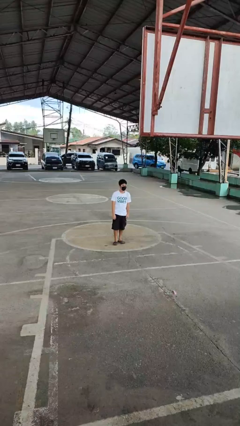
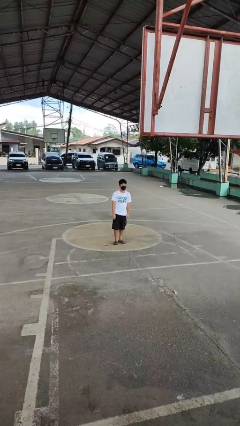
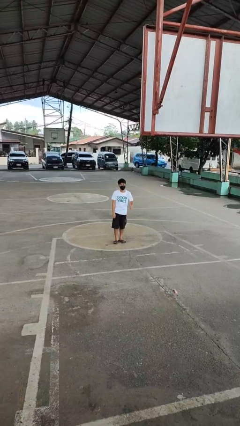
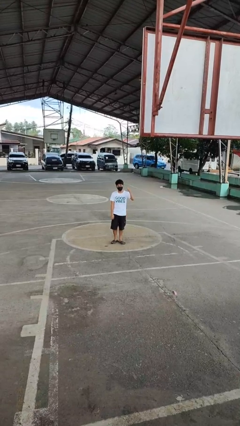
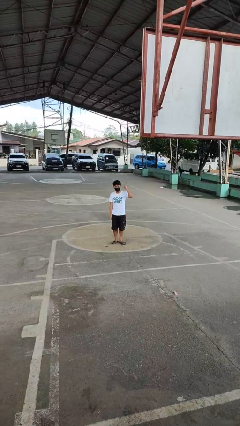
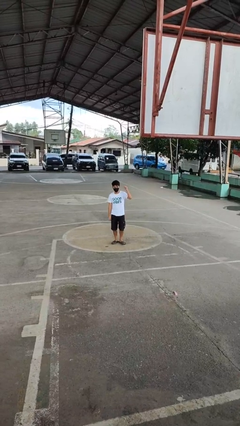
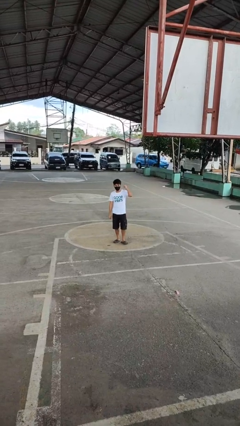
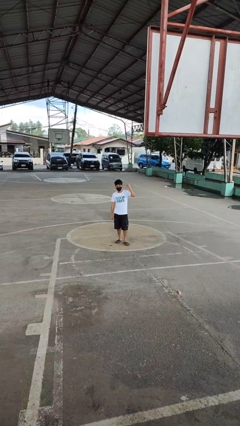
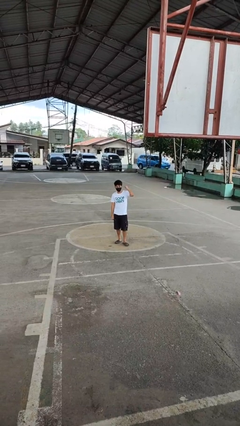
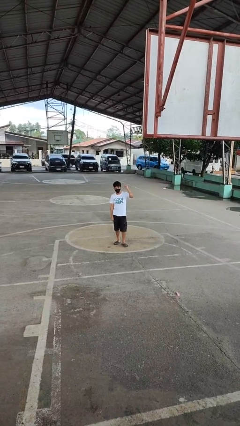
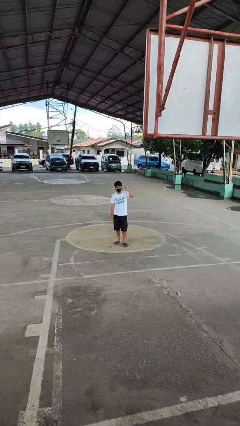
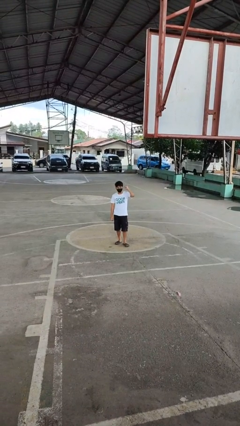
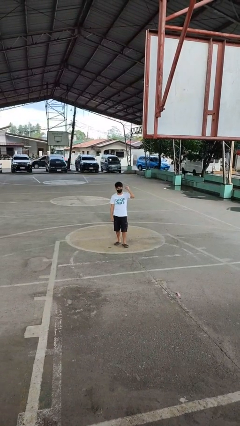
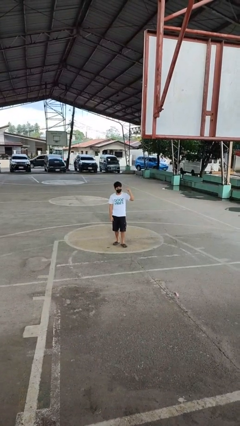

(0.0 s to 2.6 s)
person gestures behind me

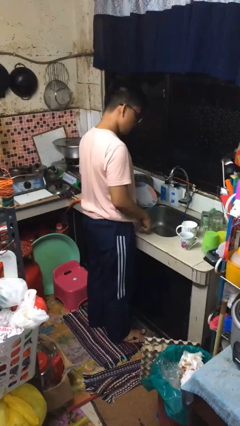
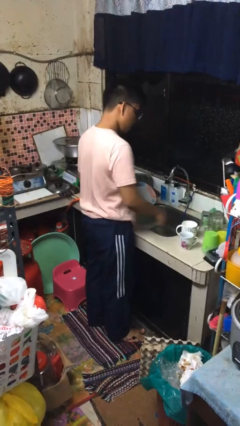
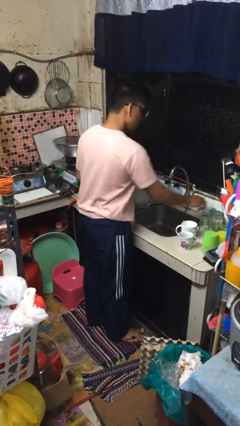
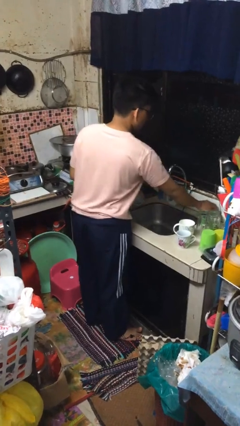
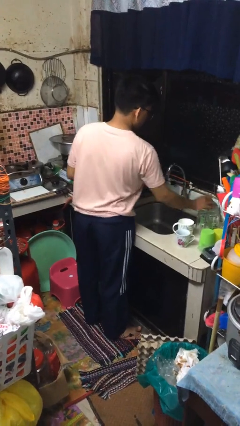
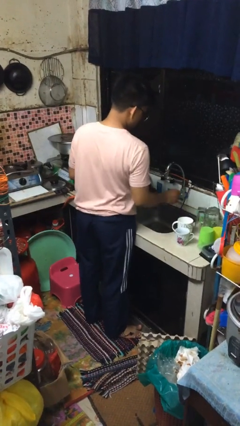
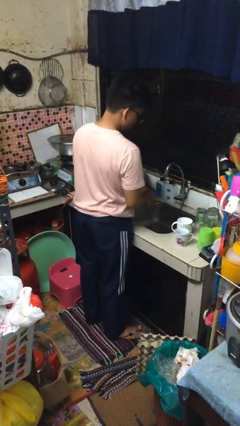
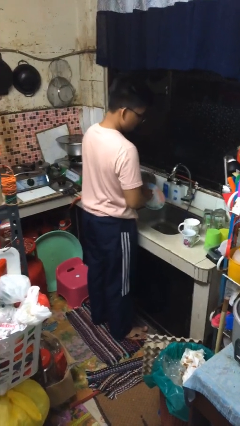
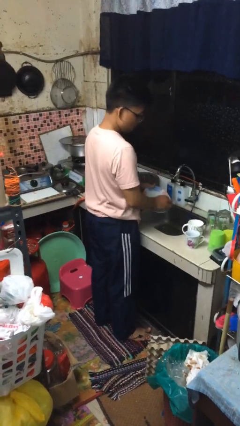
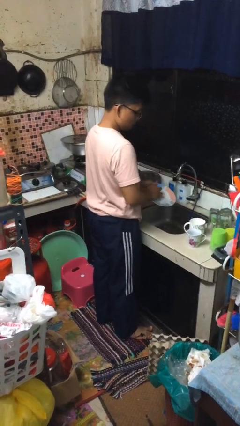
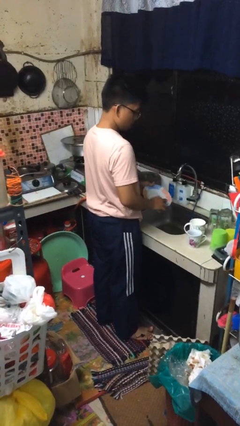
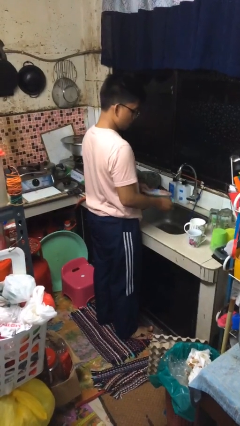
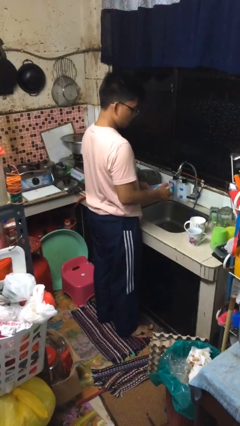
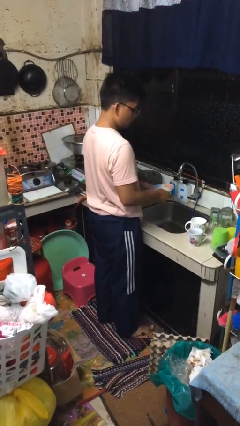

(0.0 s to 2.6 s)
person washes dish

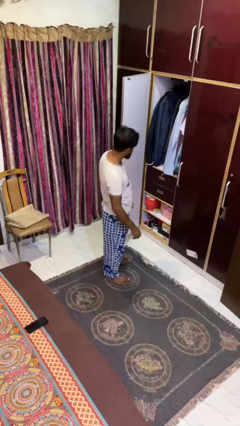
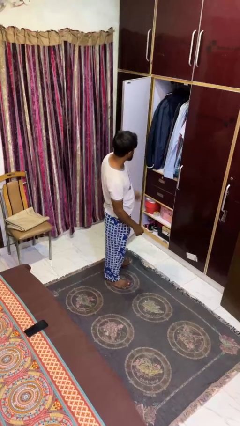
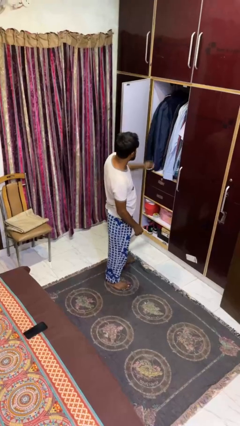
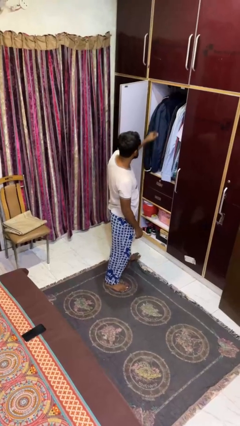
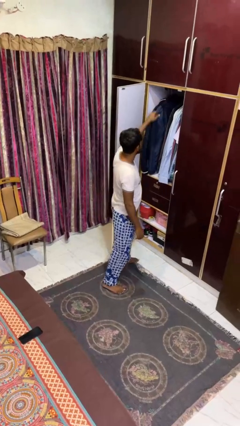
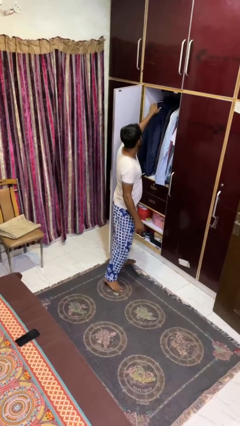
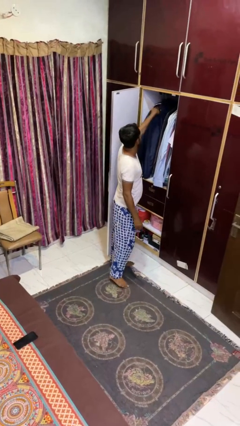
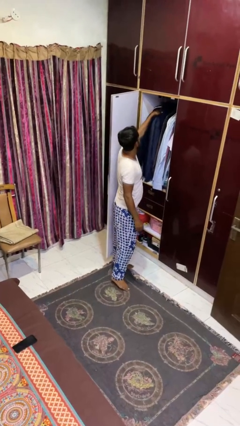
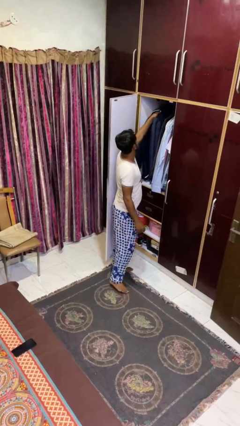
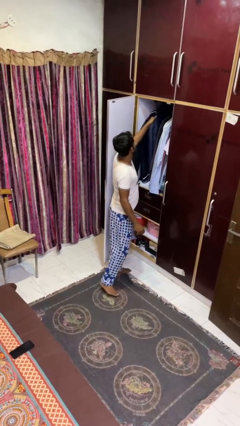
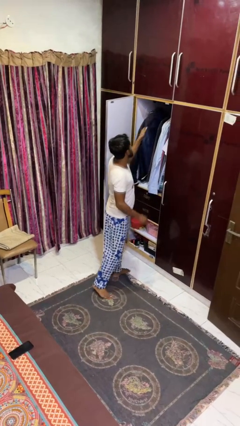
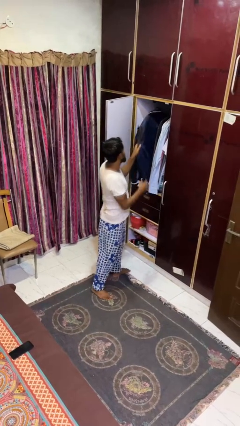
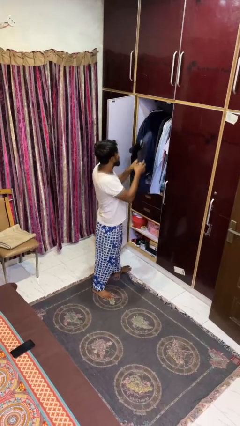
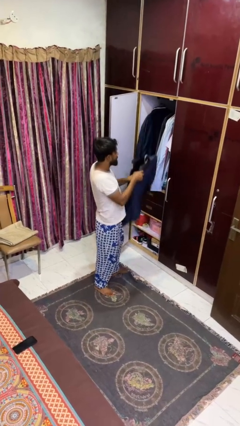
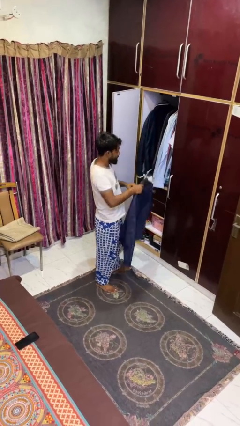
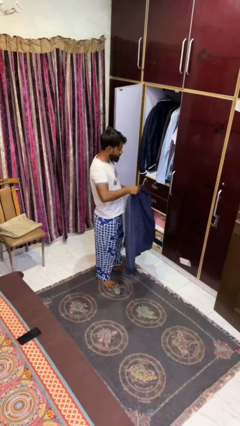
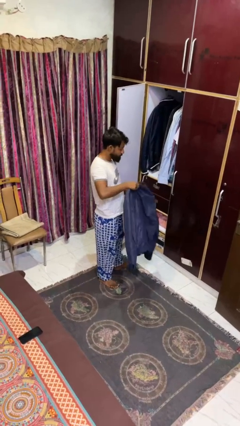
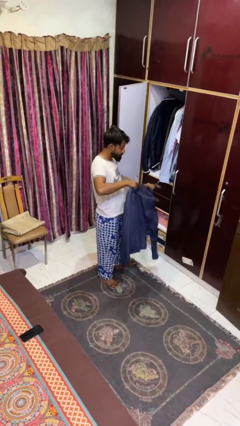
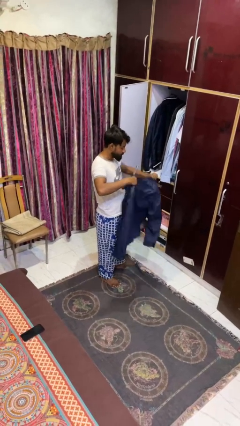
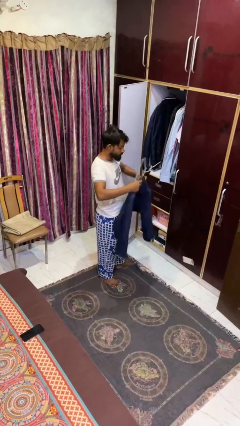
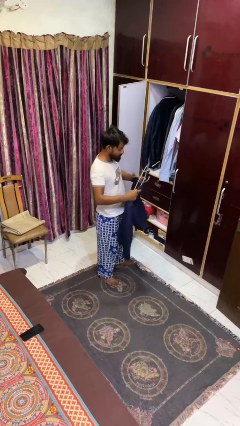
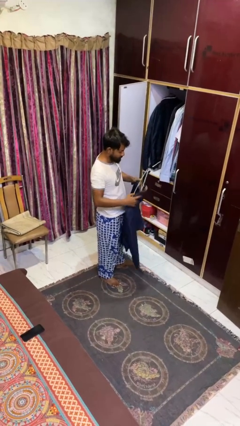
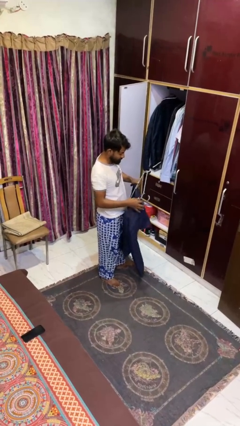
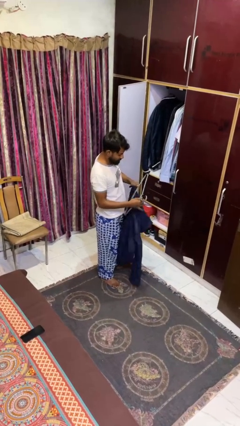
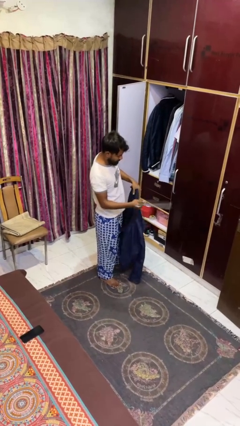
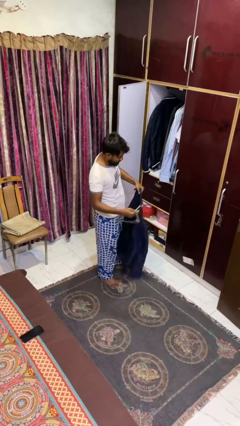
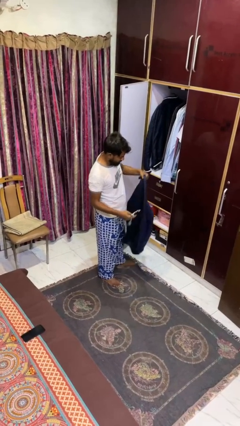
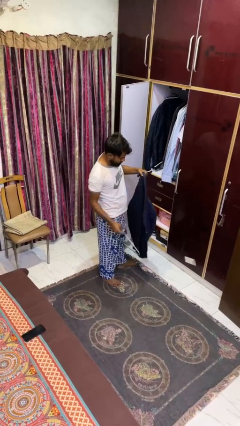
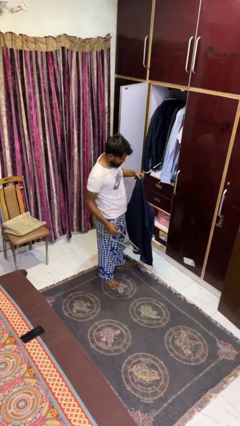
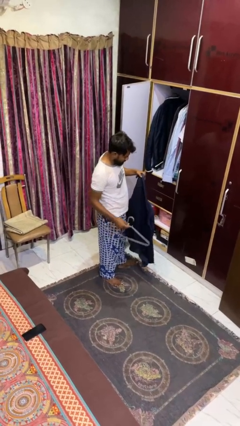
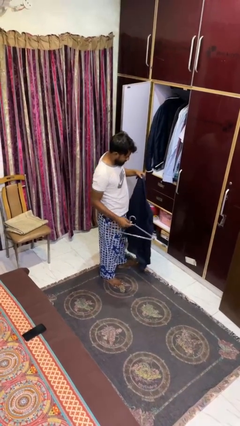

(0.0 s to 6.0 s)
person takes clothes from closet

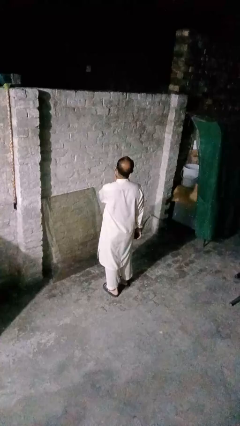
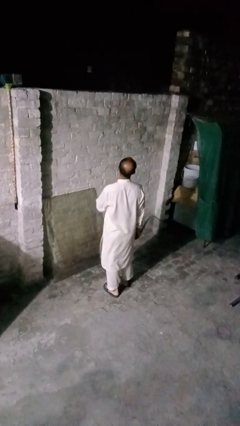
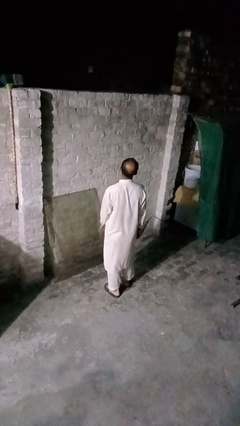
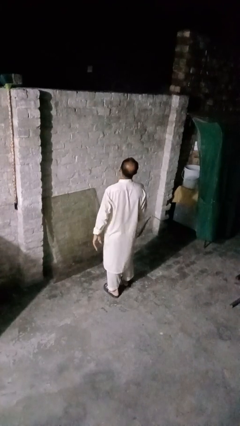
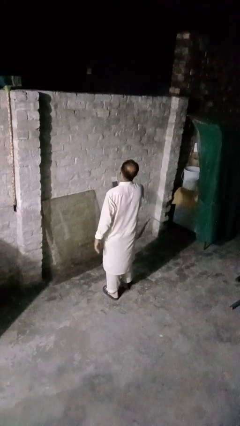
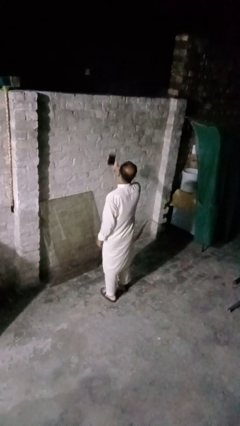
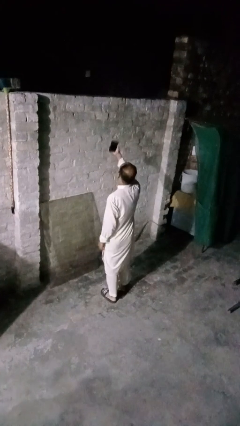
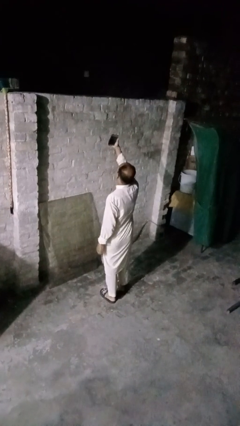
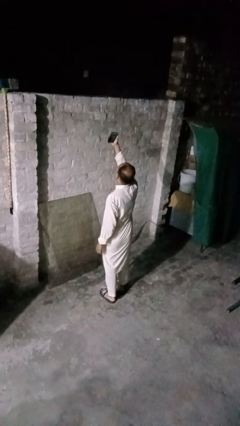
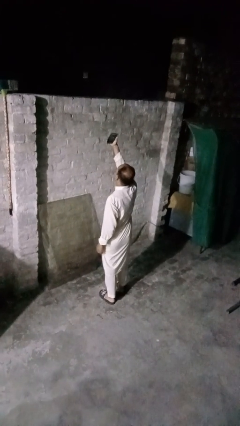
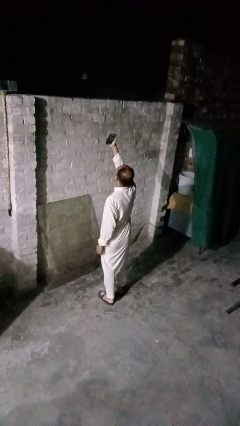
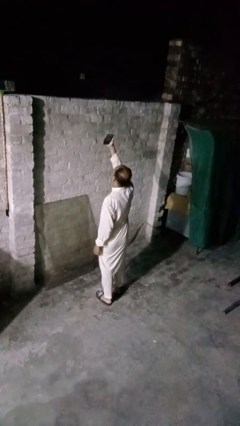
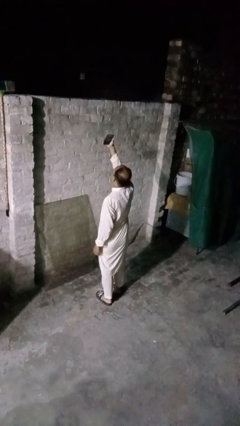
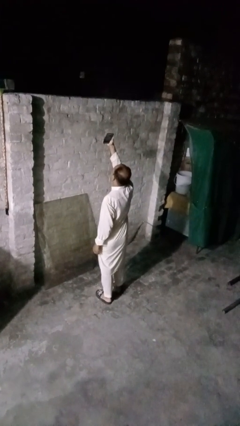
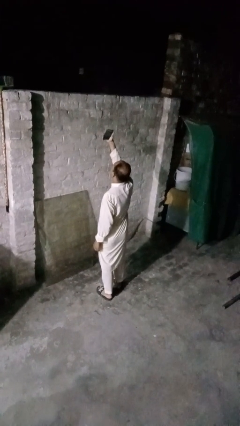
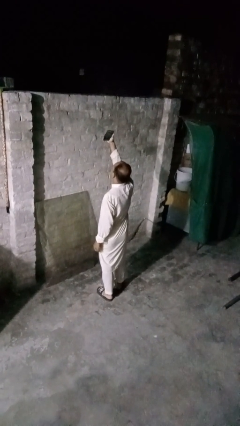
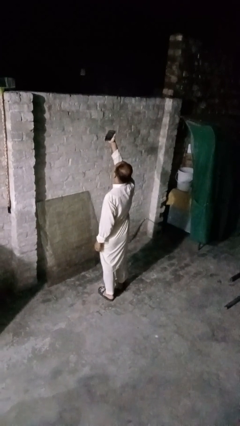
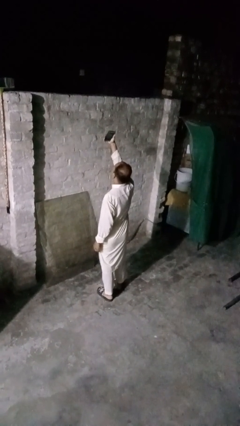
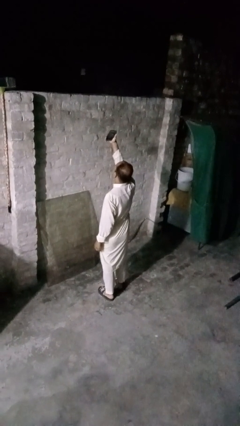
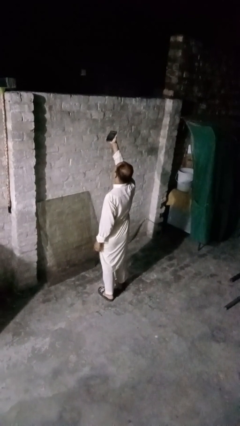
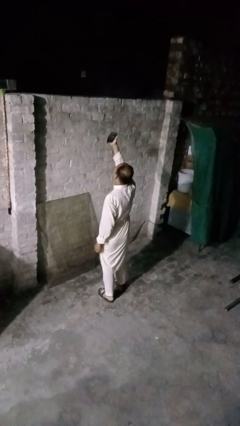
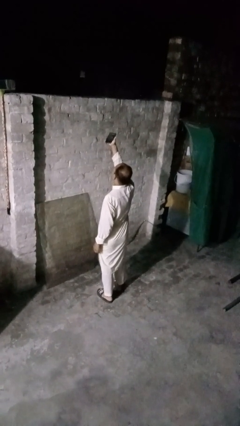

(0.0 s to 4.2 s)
person takes selfie

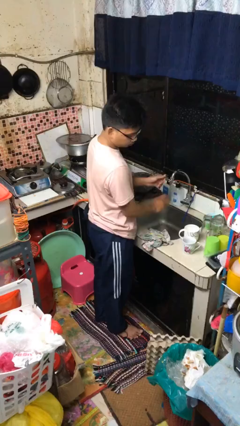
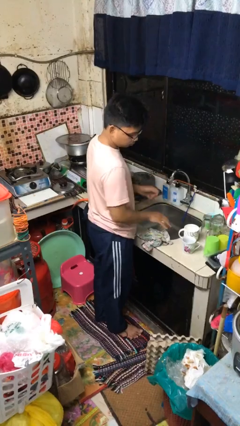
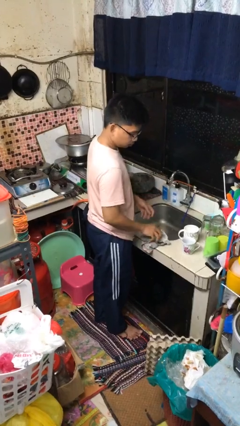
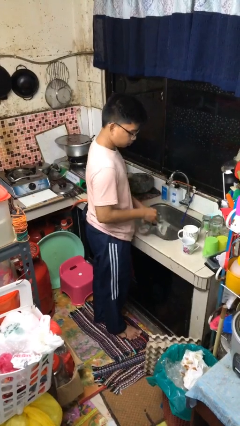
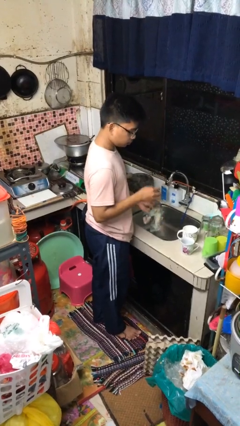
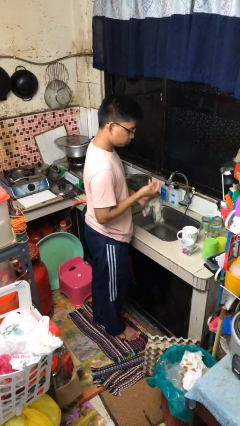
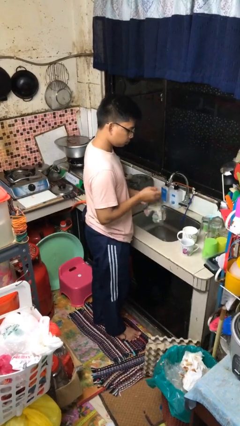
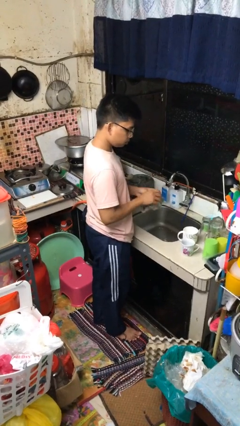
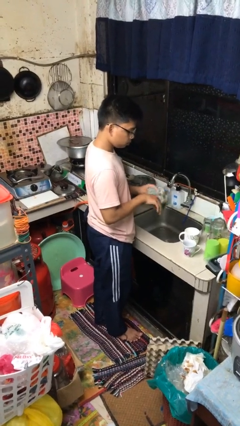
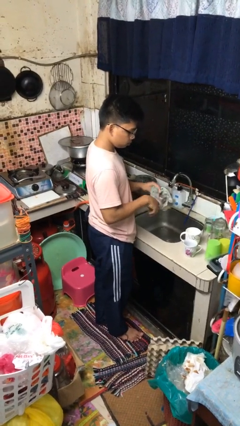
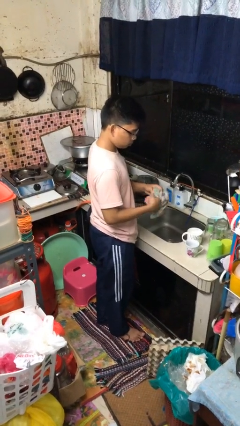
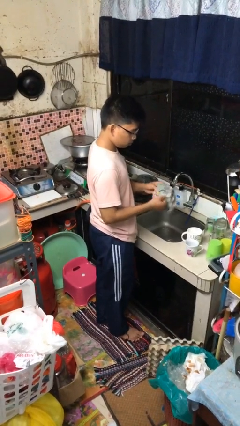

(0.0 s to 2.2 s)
person dries hands with towel

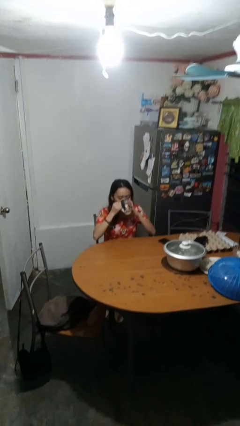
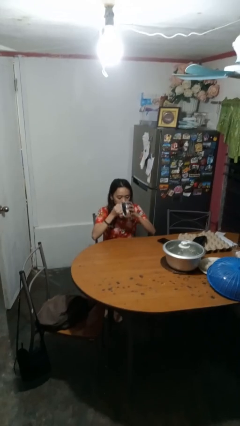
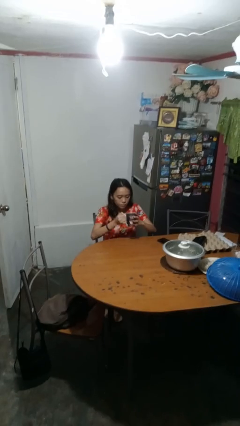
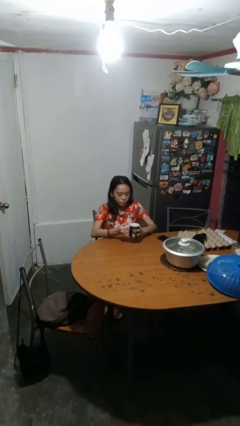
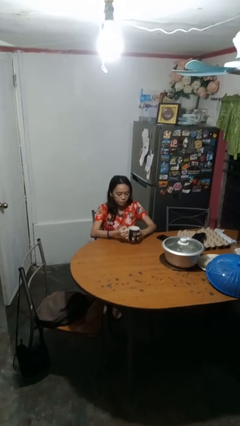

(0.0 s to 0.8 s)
person puts down object on table
